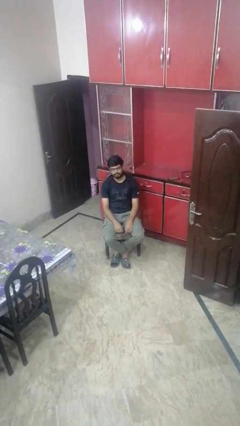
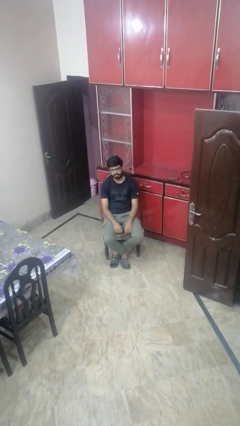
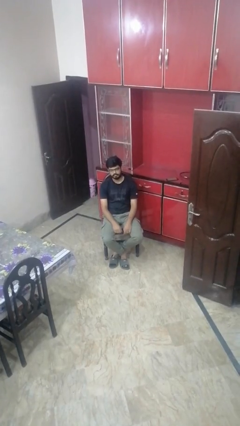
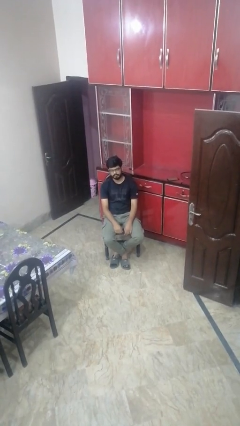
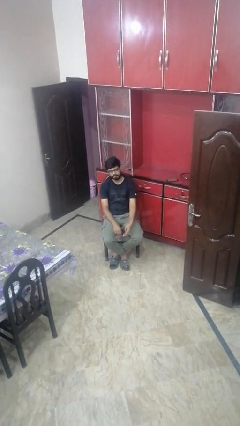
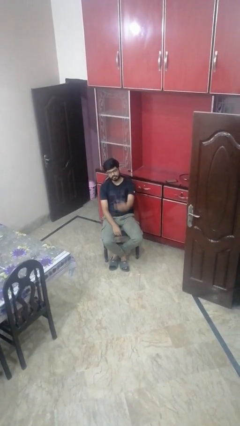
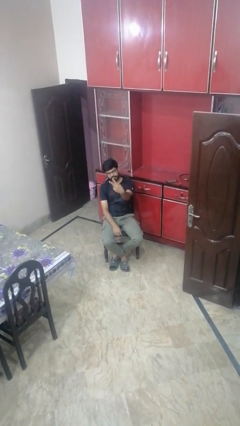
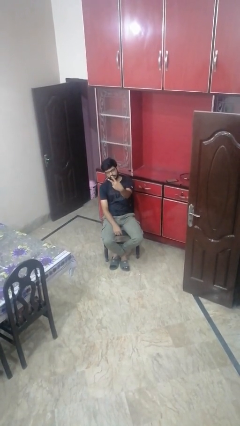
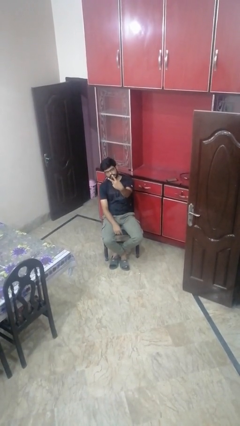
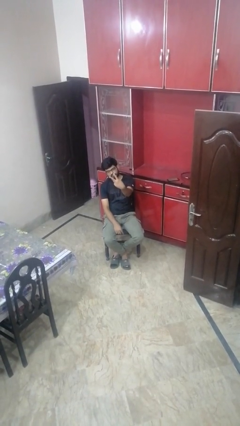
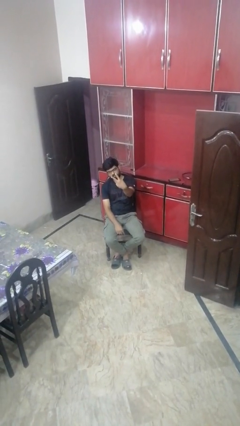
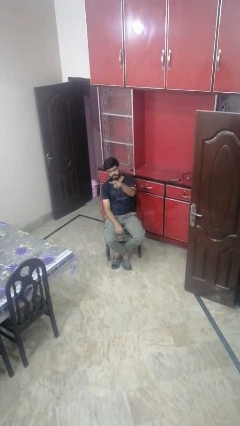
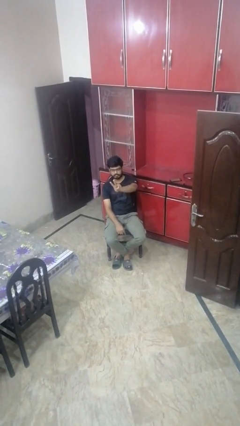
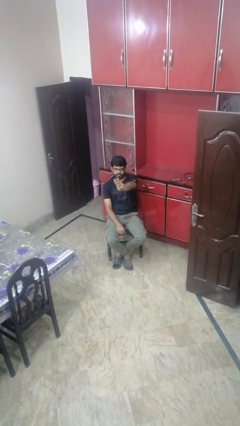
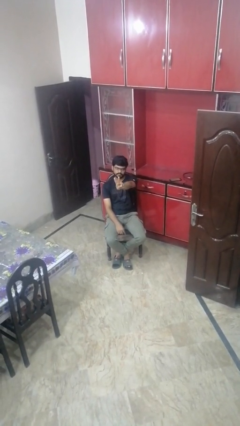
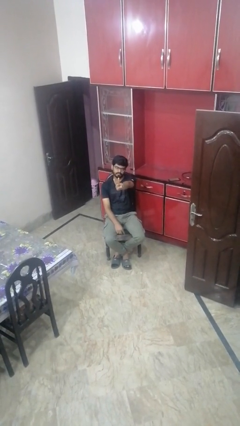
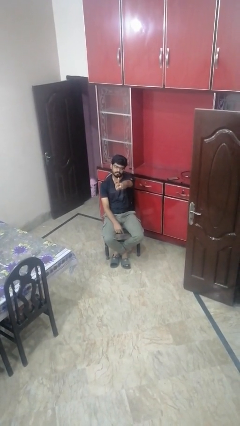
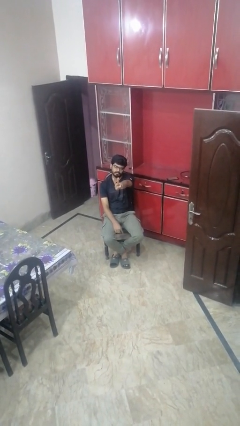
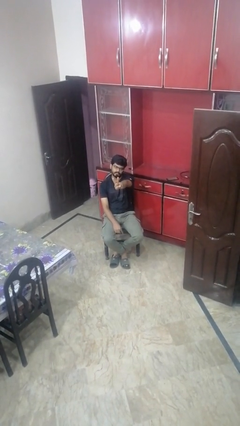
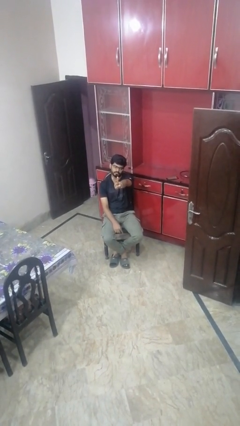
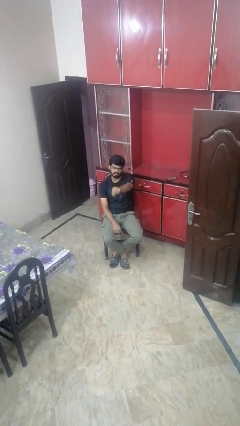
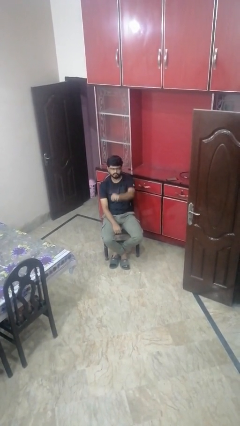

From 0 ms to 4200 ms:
person gestures peace

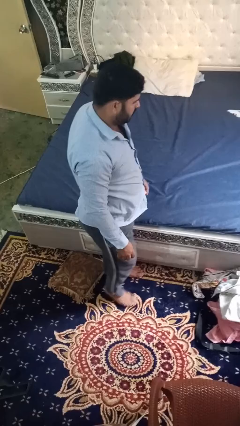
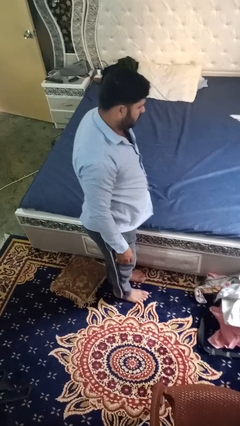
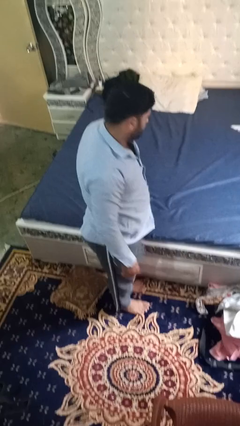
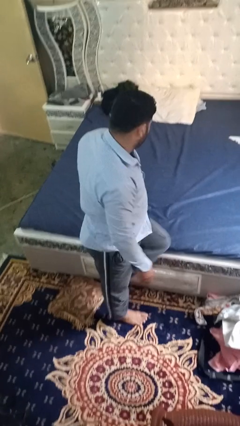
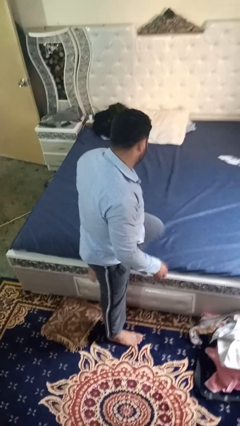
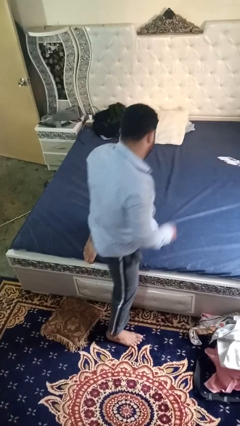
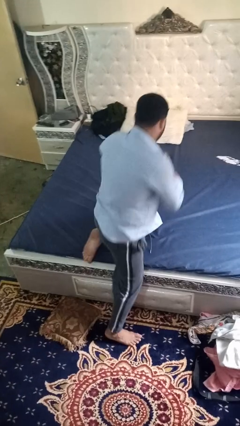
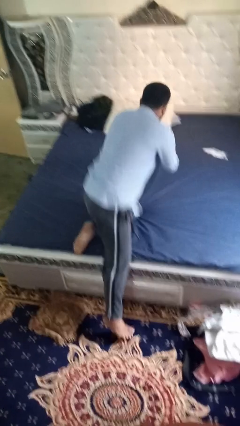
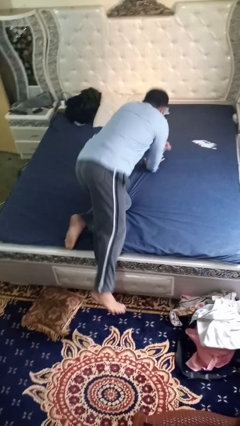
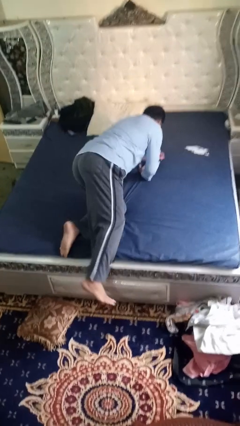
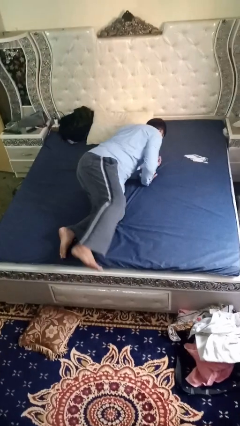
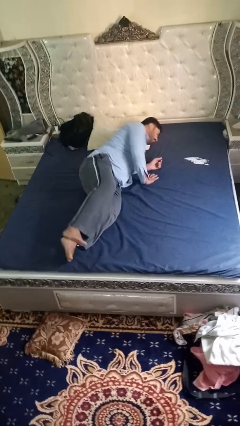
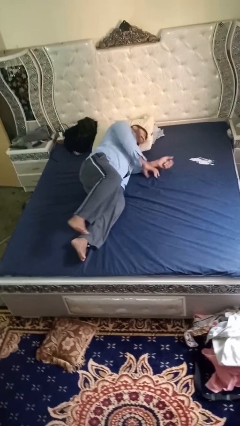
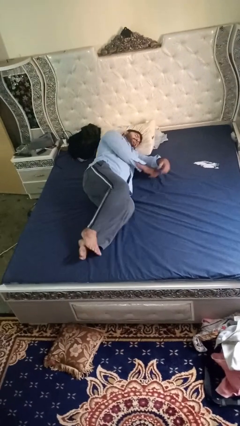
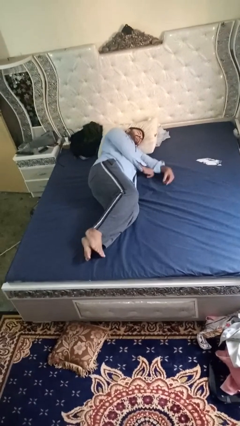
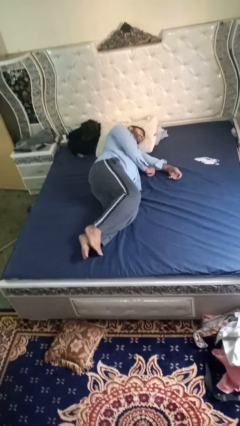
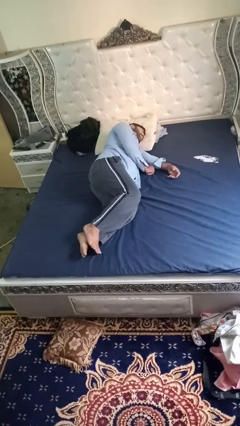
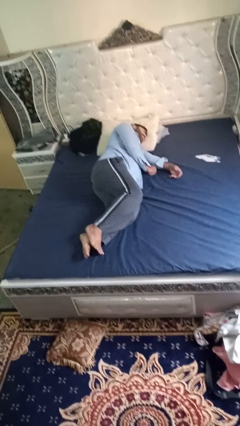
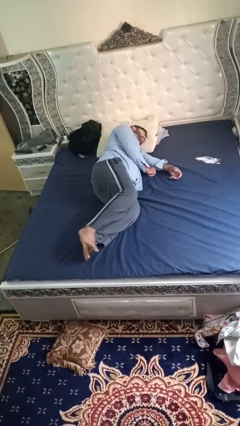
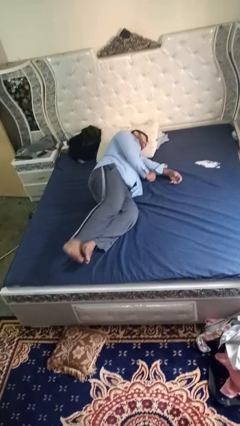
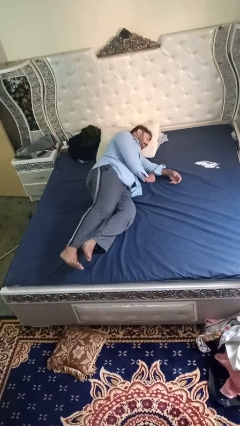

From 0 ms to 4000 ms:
person lies down on bed

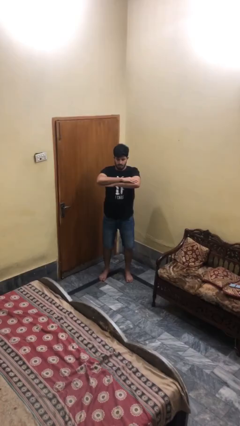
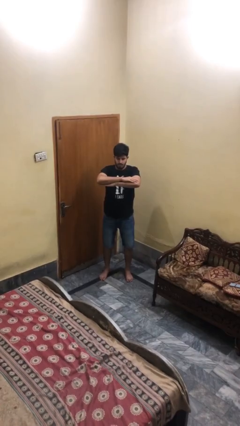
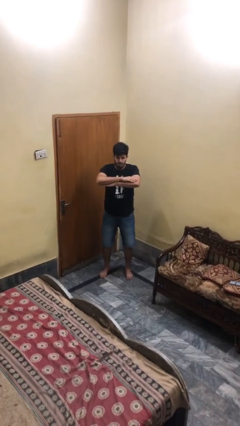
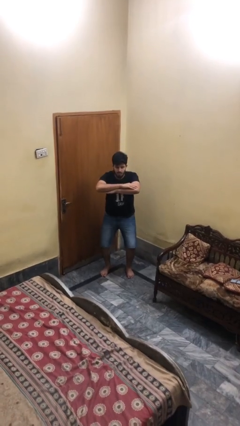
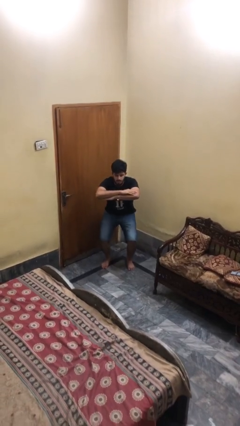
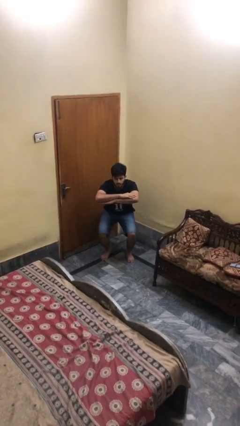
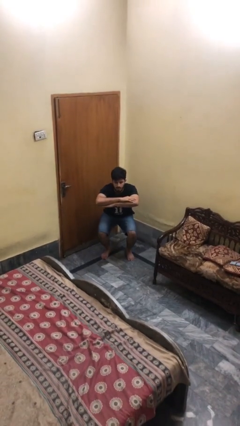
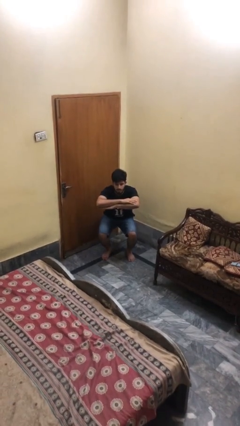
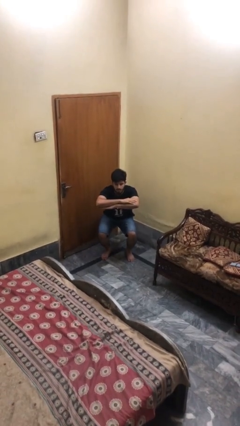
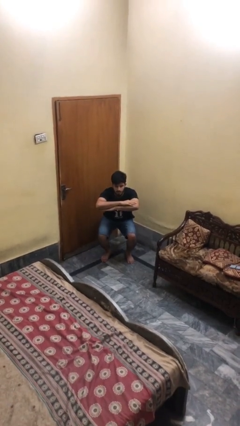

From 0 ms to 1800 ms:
person squats

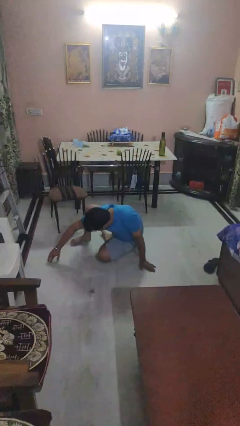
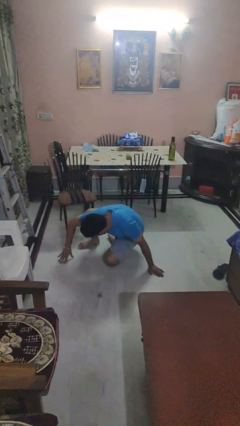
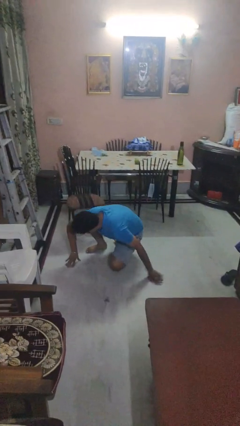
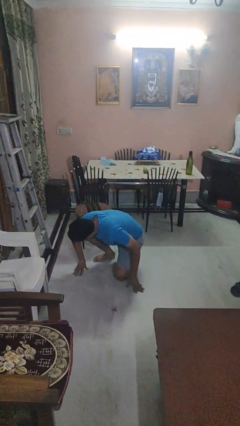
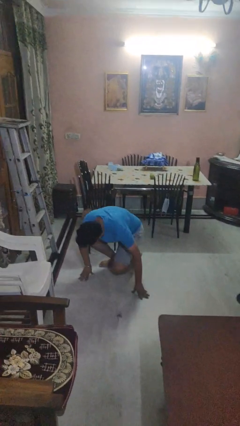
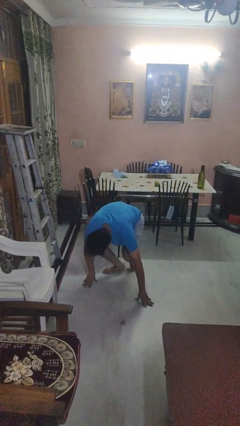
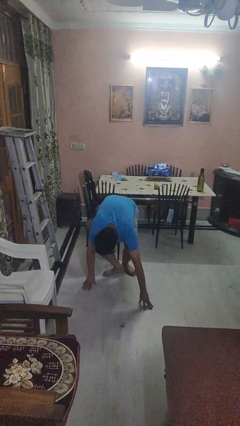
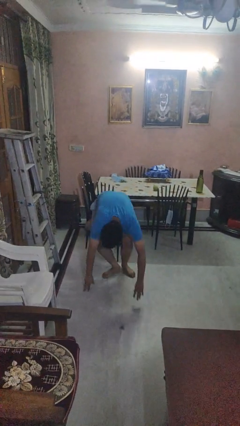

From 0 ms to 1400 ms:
person stands up from floor

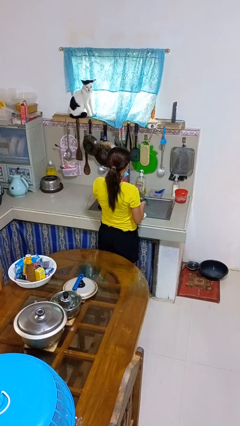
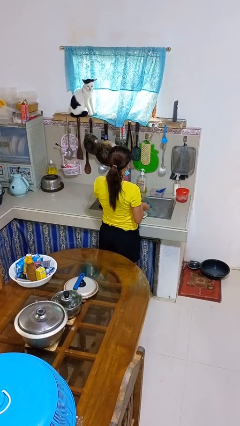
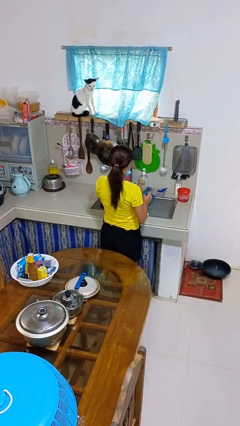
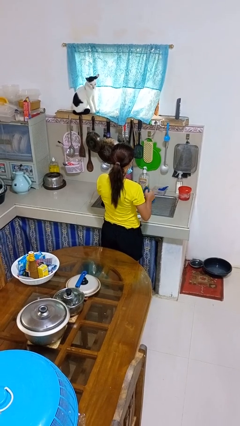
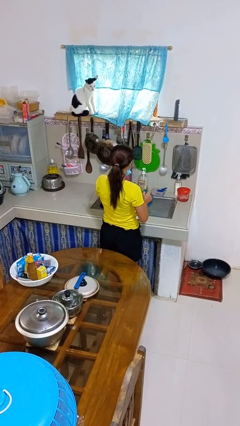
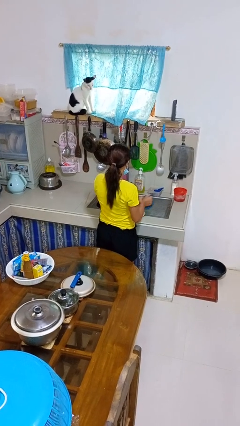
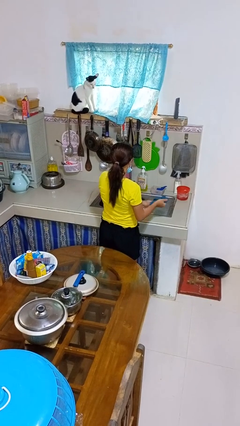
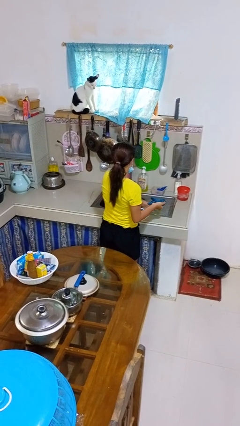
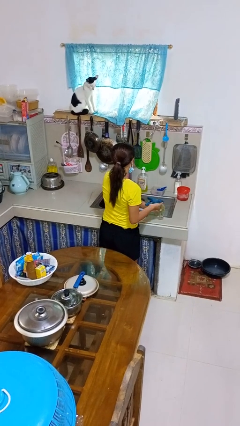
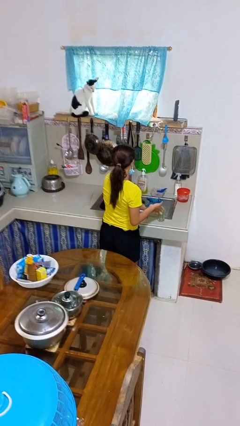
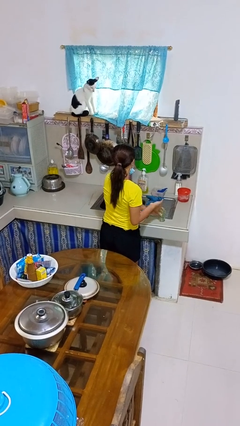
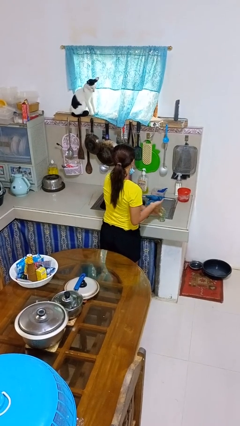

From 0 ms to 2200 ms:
person dries dish

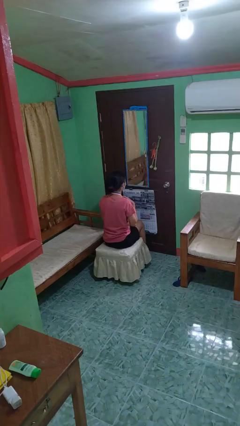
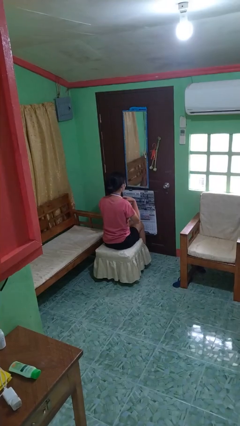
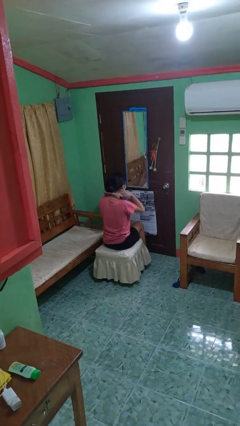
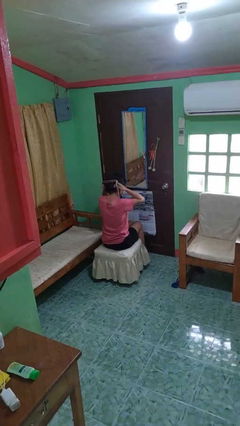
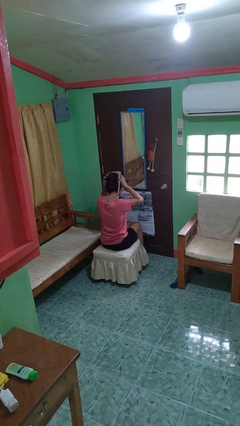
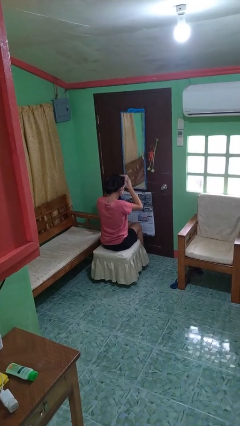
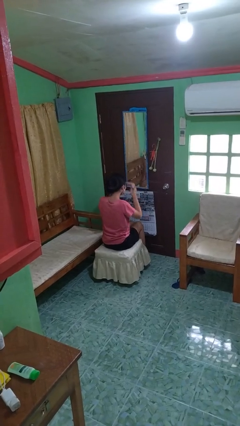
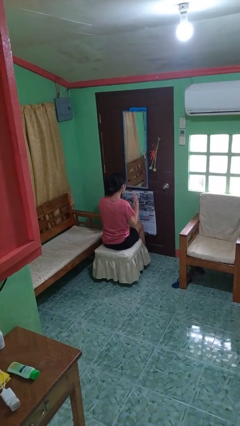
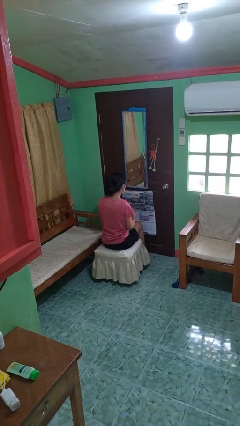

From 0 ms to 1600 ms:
person takes off necklace

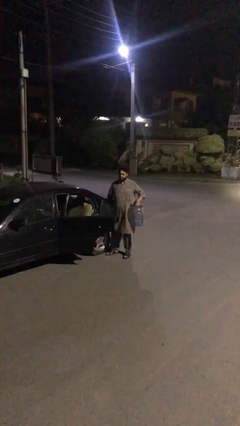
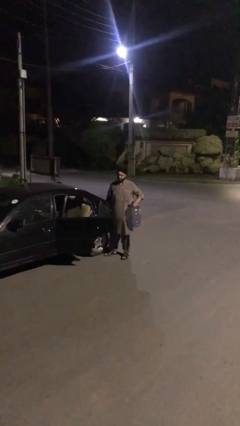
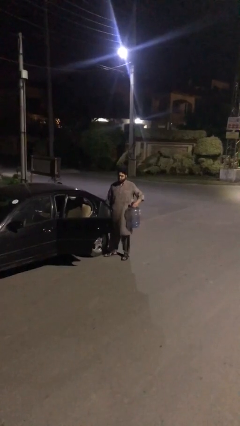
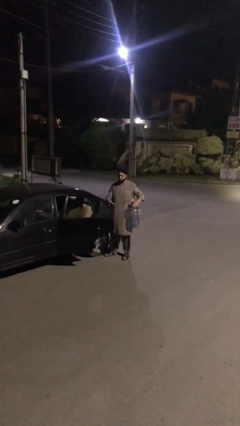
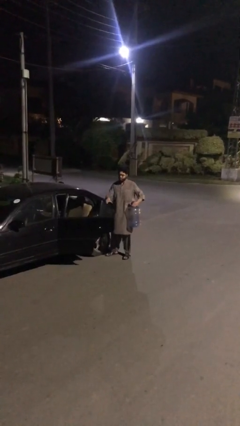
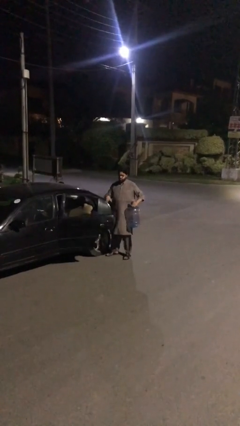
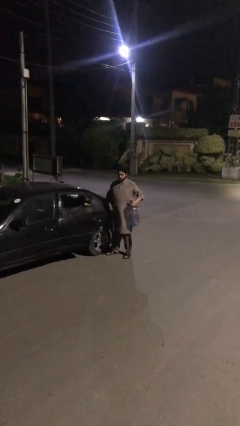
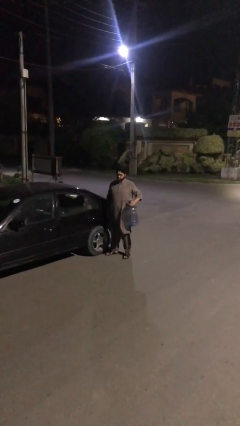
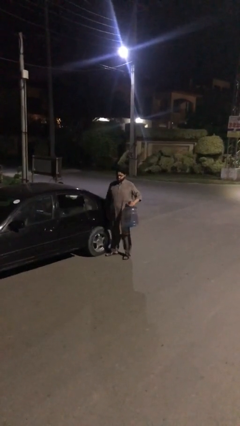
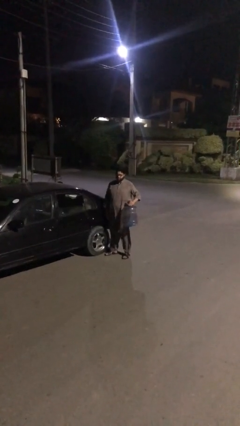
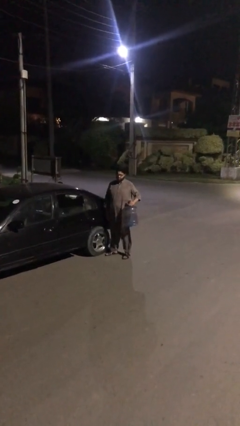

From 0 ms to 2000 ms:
person closes car door
